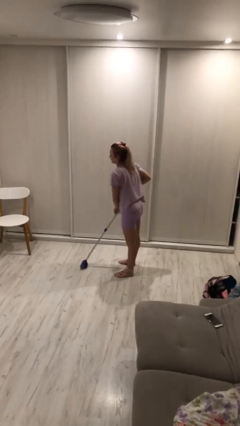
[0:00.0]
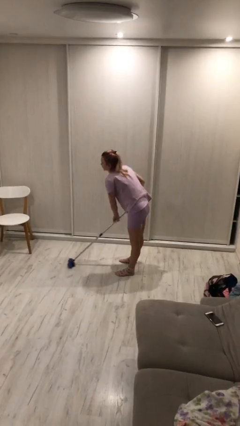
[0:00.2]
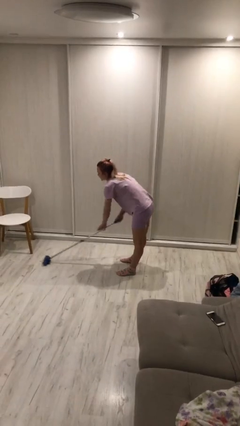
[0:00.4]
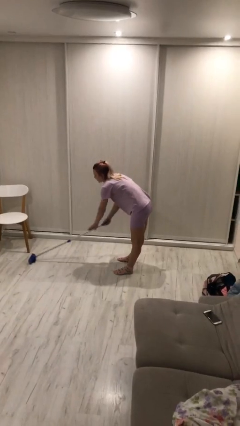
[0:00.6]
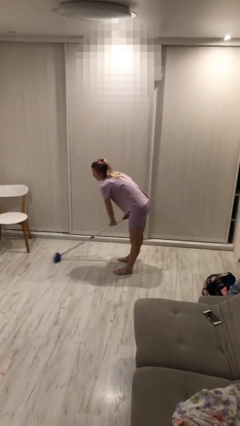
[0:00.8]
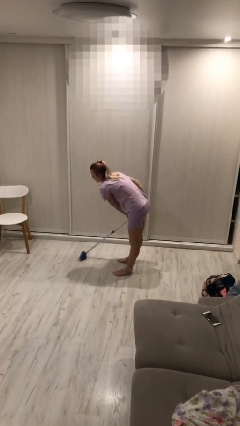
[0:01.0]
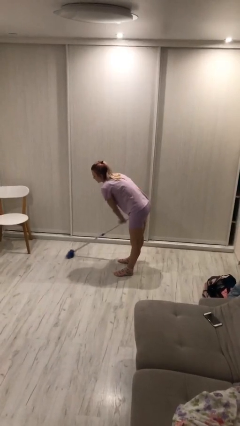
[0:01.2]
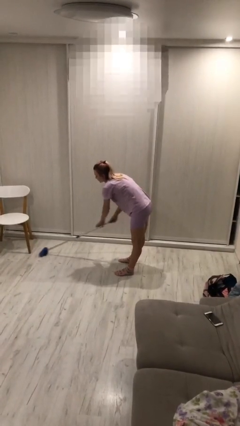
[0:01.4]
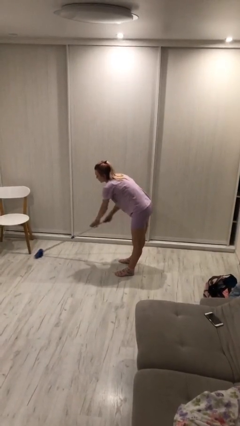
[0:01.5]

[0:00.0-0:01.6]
person mops

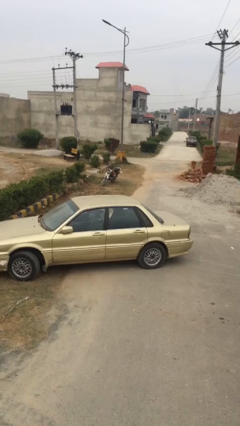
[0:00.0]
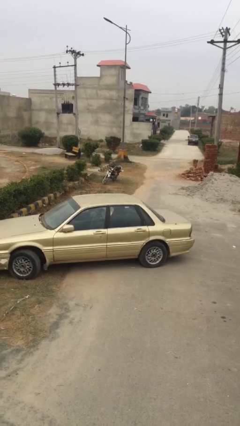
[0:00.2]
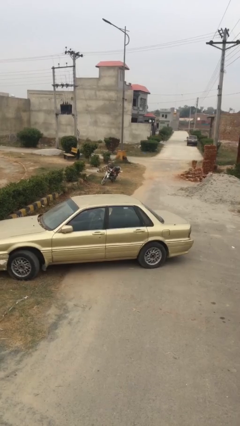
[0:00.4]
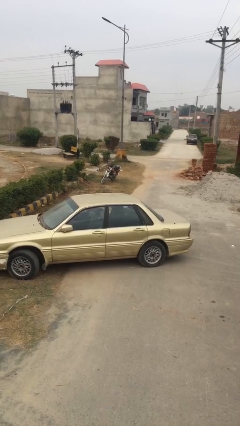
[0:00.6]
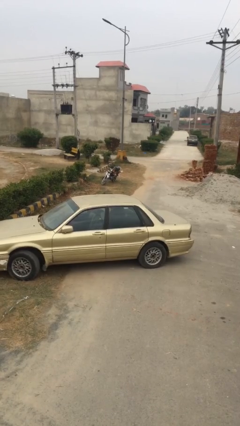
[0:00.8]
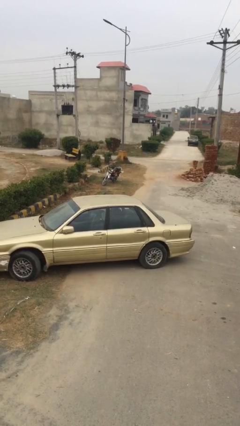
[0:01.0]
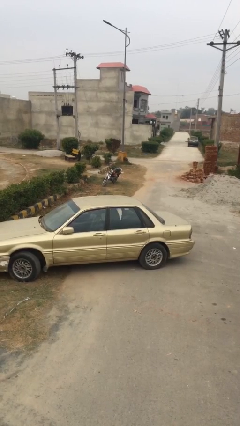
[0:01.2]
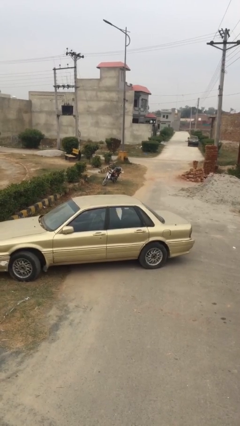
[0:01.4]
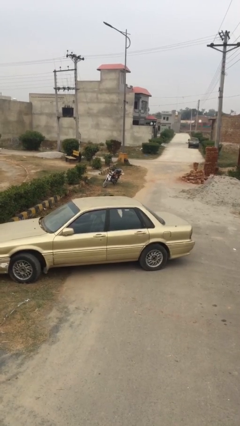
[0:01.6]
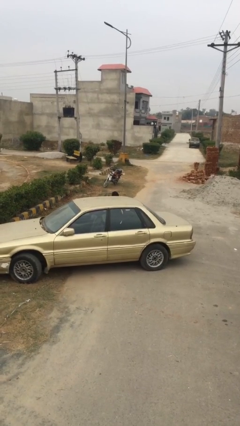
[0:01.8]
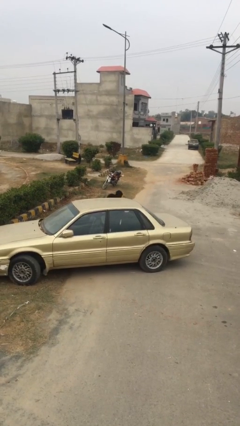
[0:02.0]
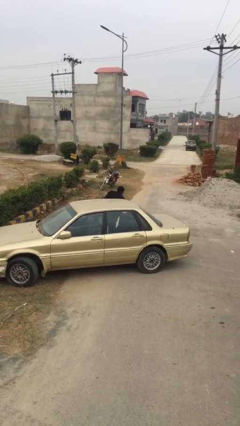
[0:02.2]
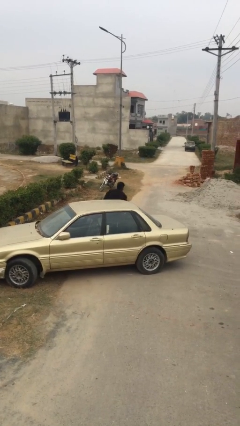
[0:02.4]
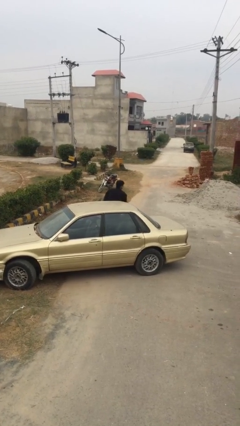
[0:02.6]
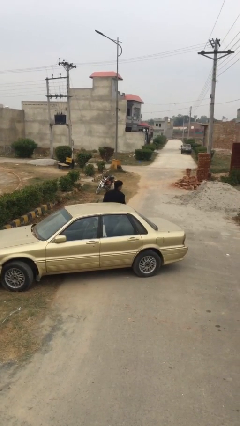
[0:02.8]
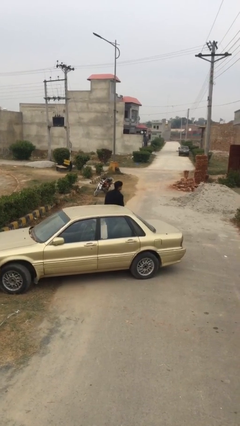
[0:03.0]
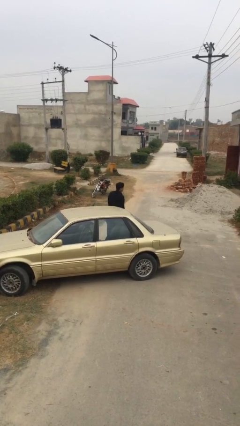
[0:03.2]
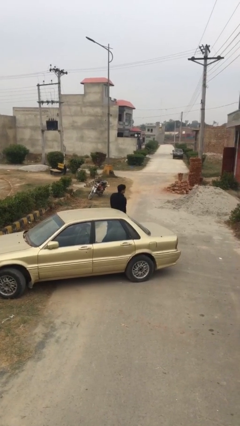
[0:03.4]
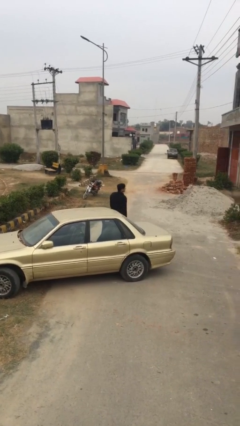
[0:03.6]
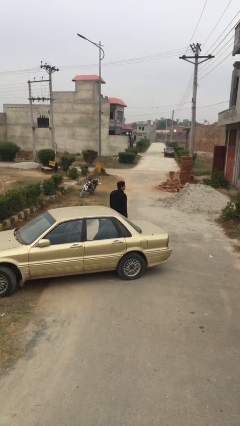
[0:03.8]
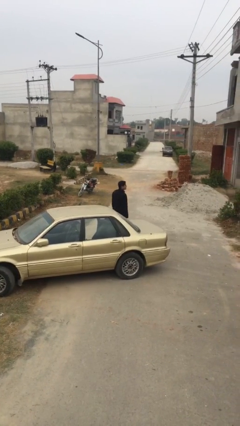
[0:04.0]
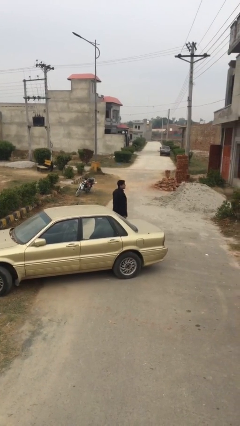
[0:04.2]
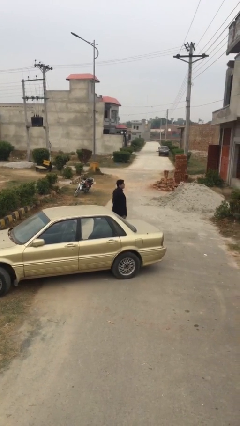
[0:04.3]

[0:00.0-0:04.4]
person exits car

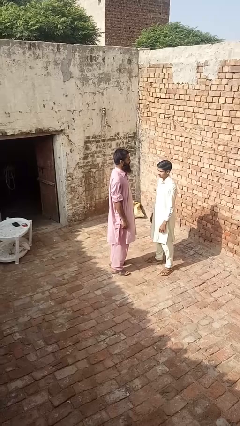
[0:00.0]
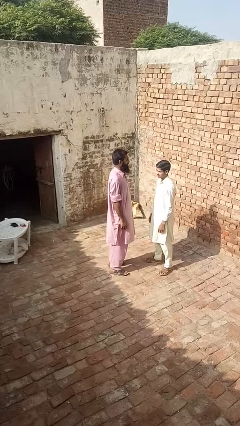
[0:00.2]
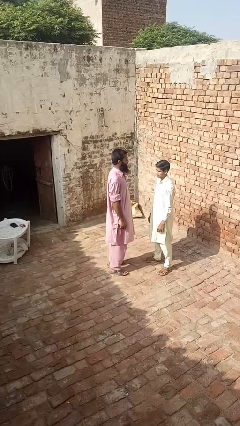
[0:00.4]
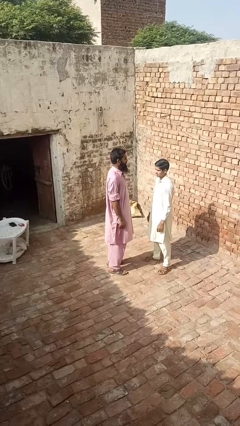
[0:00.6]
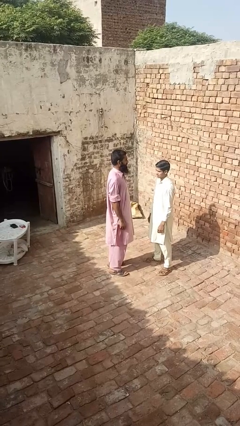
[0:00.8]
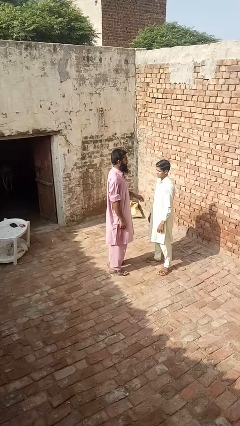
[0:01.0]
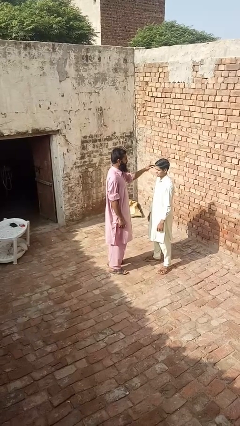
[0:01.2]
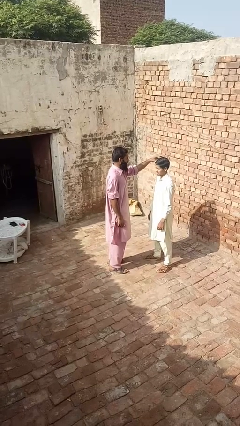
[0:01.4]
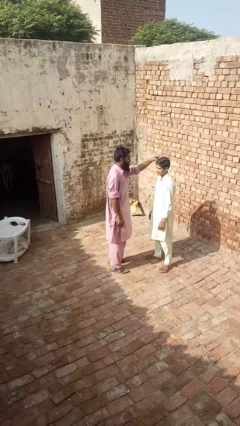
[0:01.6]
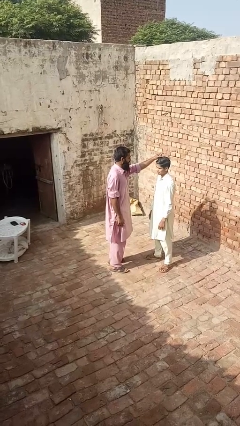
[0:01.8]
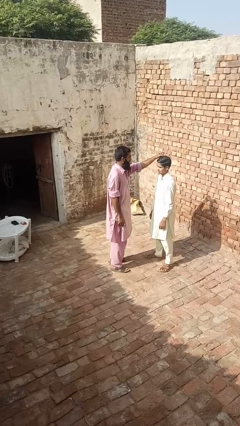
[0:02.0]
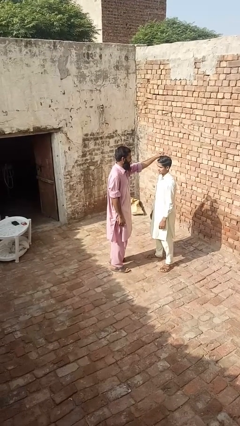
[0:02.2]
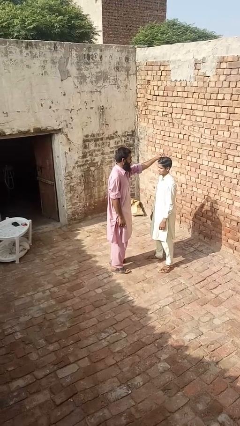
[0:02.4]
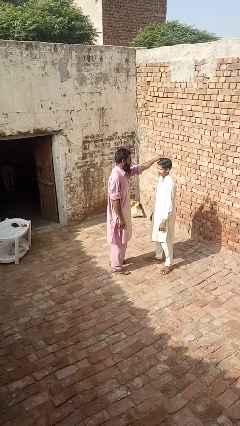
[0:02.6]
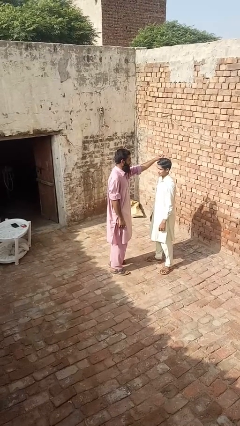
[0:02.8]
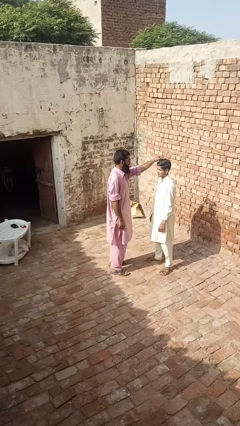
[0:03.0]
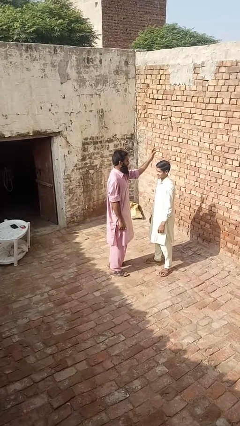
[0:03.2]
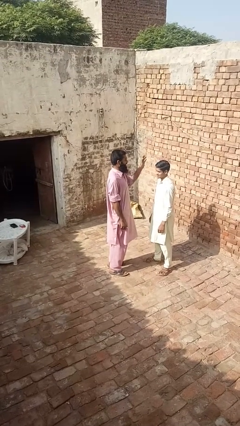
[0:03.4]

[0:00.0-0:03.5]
person grabs person by hair

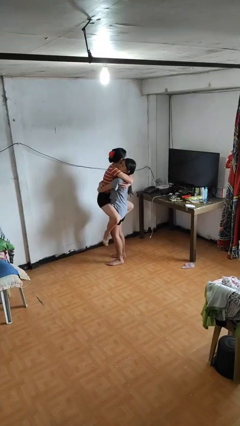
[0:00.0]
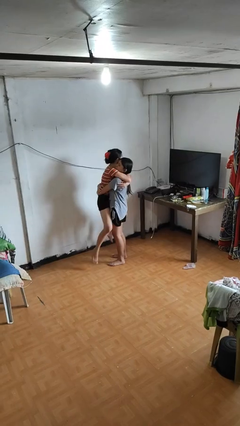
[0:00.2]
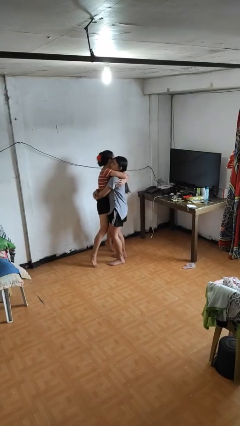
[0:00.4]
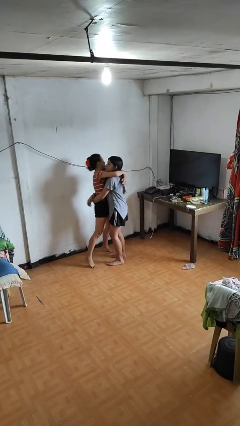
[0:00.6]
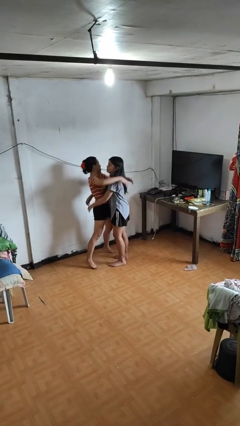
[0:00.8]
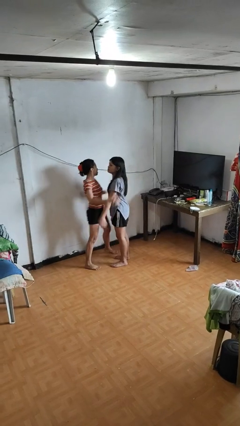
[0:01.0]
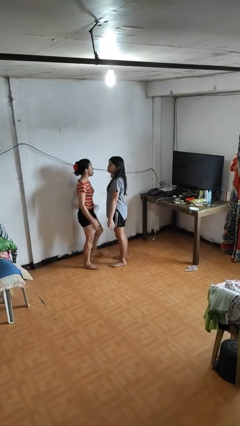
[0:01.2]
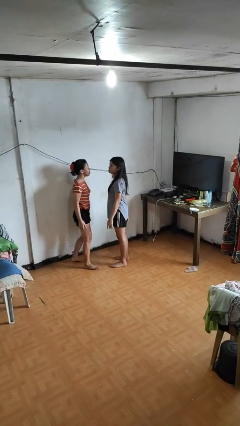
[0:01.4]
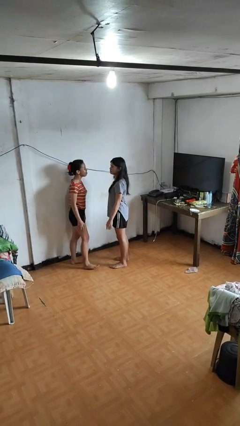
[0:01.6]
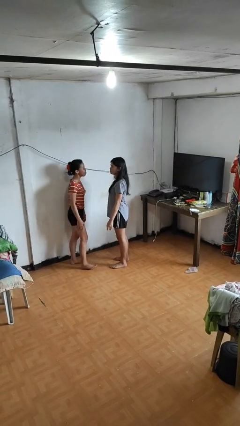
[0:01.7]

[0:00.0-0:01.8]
person puts down person

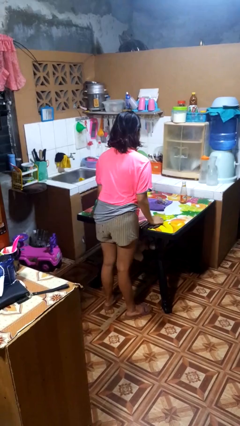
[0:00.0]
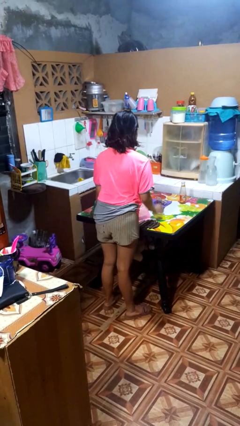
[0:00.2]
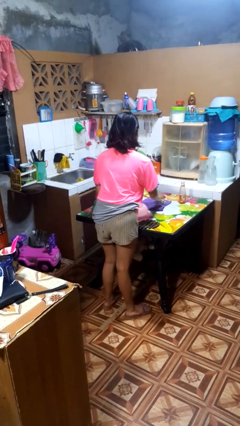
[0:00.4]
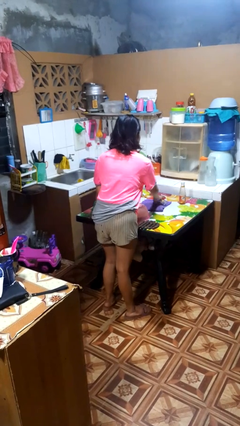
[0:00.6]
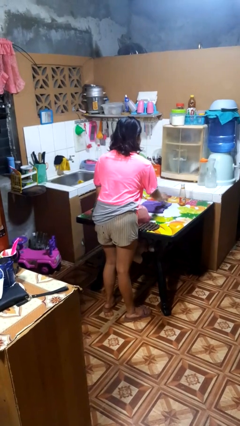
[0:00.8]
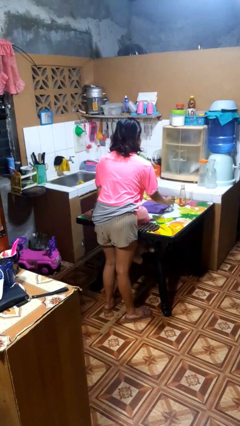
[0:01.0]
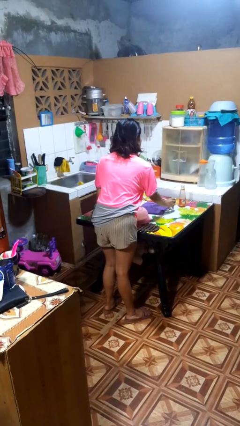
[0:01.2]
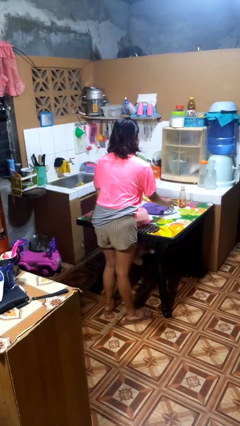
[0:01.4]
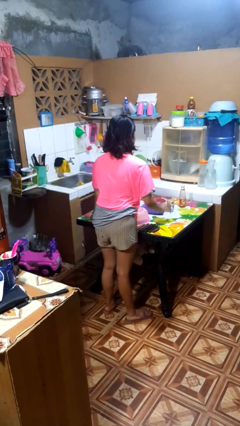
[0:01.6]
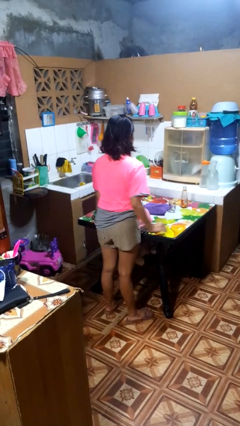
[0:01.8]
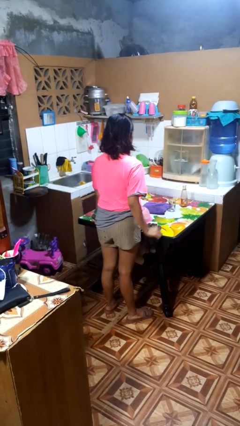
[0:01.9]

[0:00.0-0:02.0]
person sets upright glass

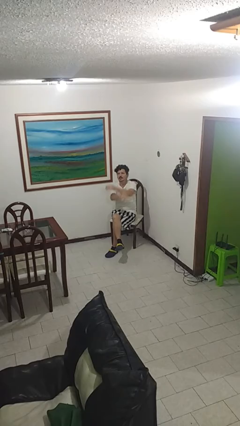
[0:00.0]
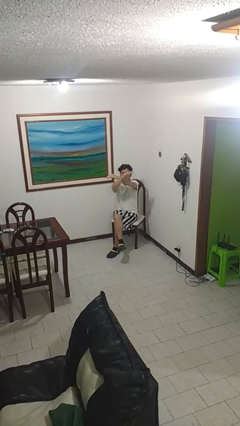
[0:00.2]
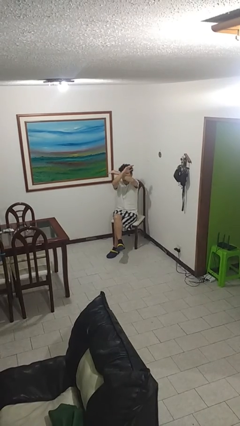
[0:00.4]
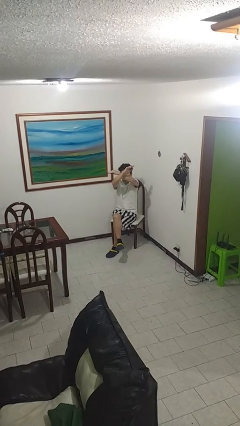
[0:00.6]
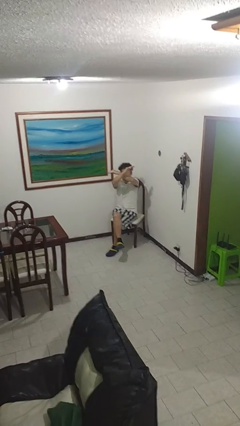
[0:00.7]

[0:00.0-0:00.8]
person gestures arms x

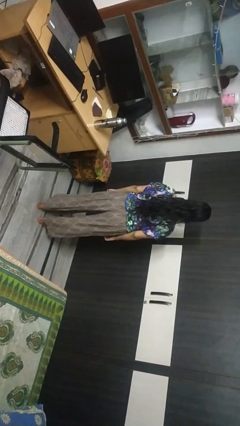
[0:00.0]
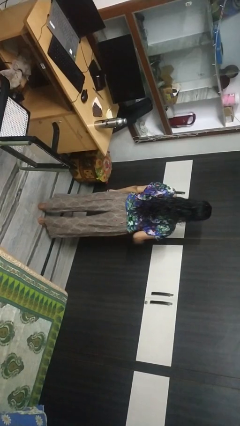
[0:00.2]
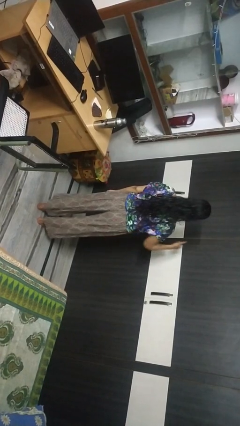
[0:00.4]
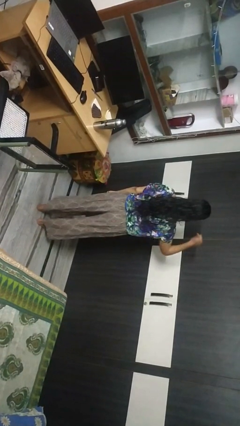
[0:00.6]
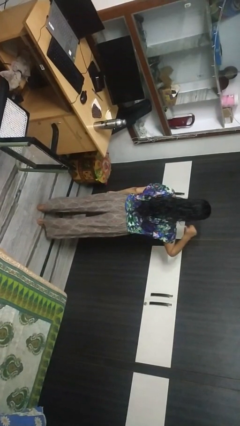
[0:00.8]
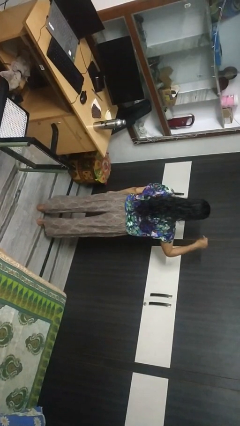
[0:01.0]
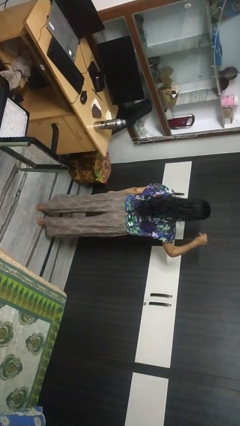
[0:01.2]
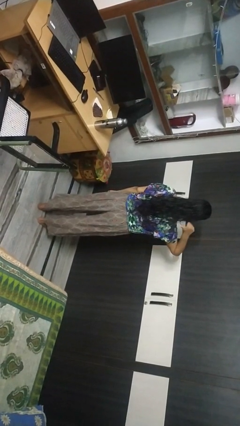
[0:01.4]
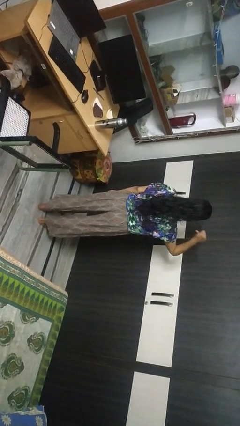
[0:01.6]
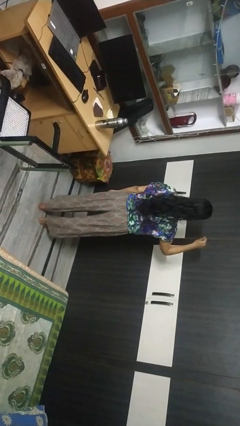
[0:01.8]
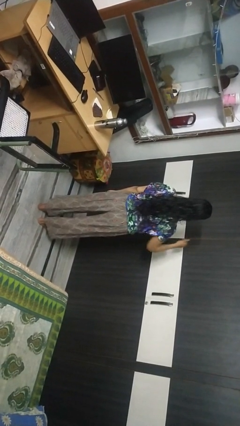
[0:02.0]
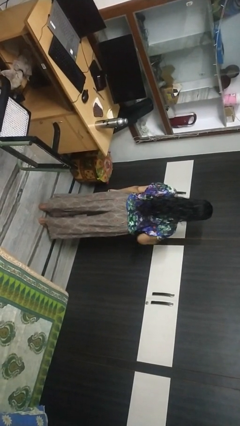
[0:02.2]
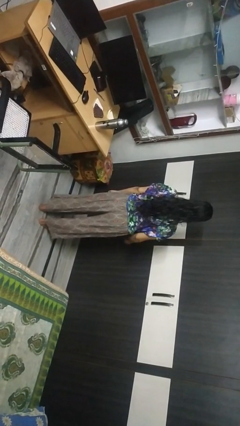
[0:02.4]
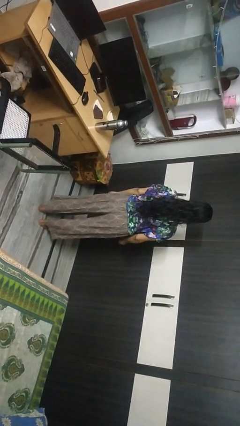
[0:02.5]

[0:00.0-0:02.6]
person gestures behind me

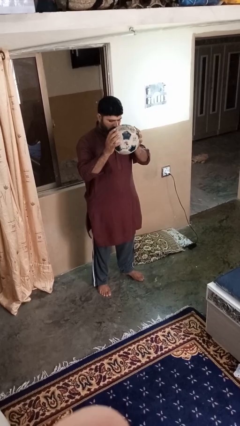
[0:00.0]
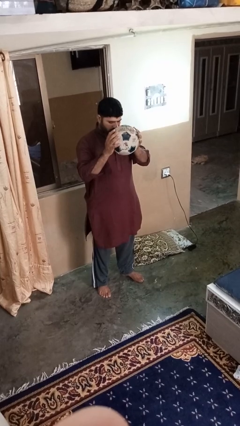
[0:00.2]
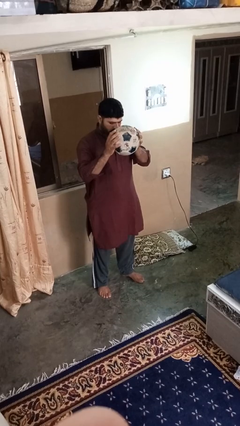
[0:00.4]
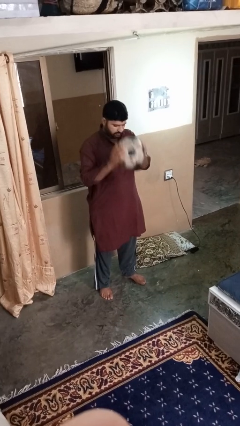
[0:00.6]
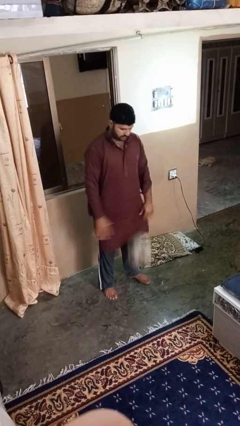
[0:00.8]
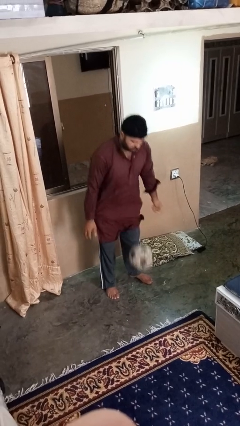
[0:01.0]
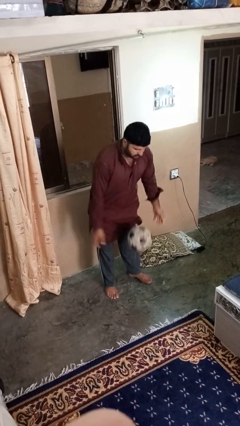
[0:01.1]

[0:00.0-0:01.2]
person bounces ball on floor
